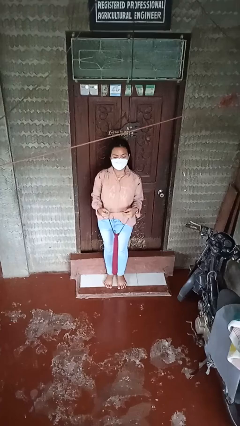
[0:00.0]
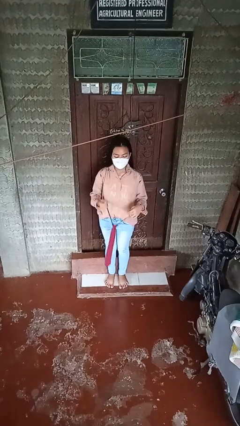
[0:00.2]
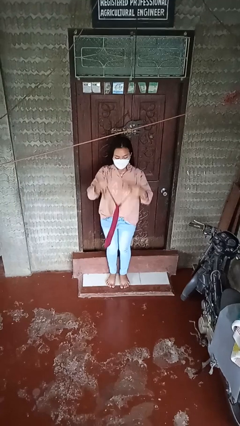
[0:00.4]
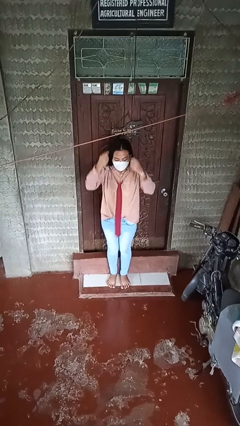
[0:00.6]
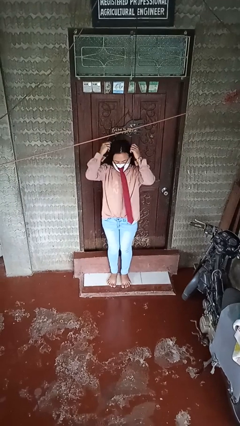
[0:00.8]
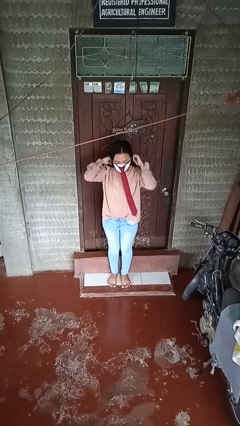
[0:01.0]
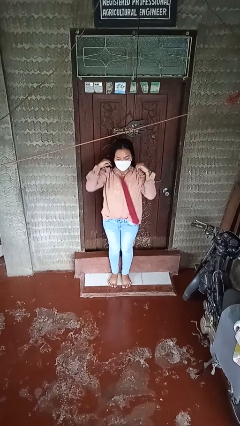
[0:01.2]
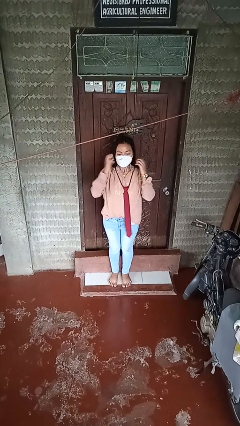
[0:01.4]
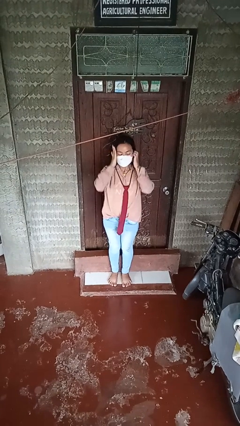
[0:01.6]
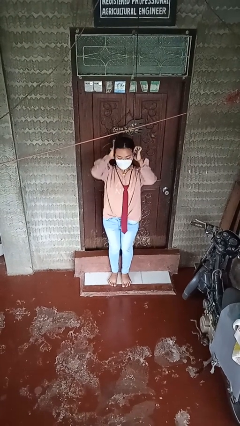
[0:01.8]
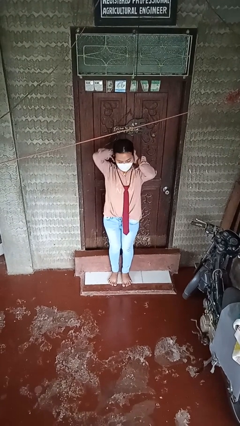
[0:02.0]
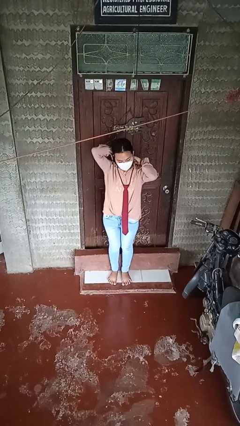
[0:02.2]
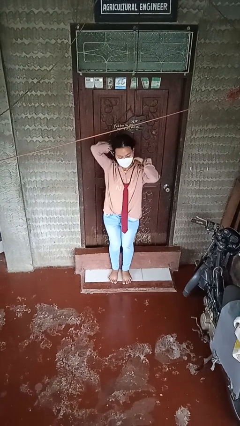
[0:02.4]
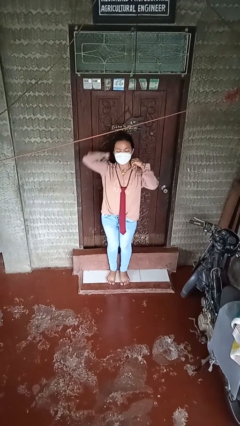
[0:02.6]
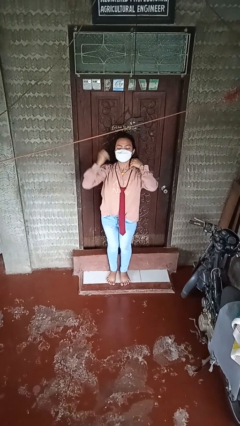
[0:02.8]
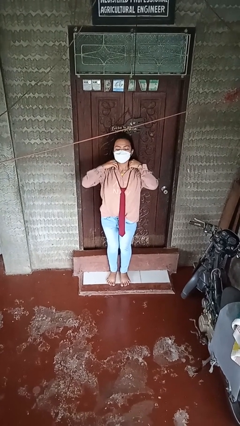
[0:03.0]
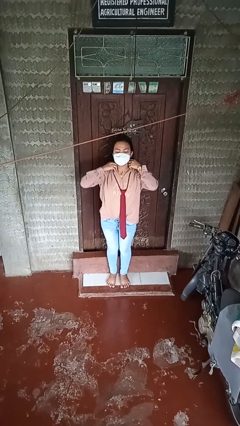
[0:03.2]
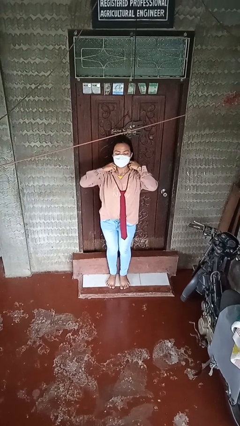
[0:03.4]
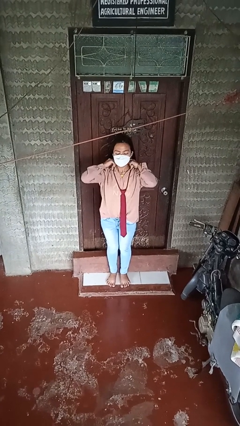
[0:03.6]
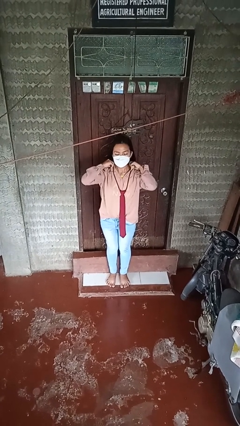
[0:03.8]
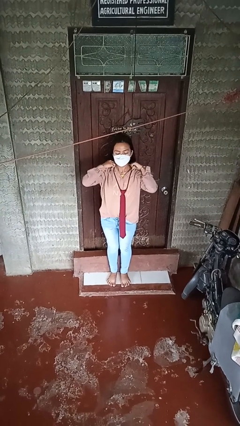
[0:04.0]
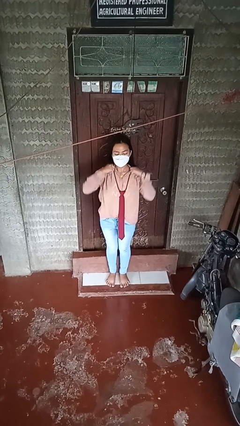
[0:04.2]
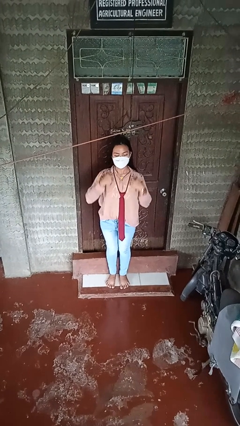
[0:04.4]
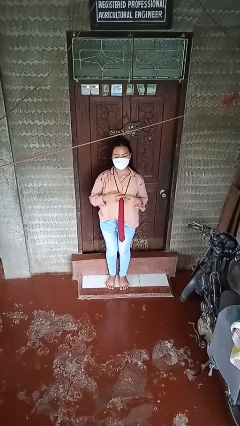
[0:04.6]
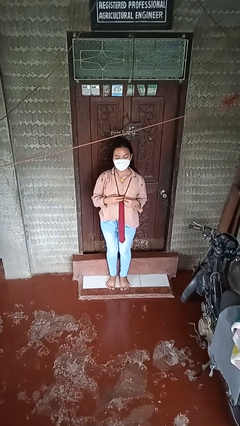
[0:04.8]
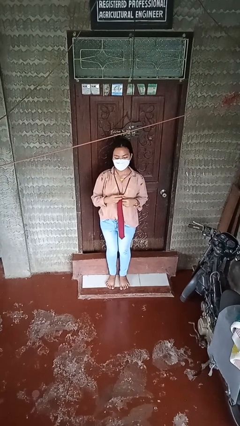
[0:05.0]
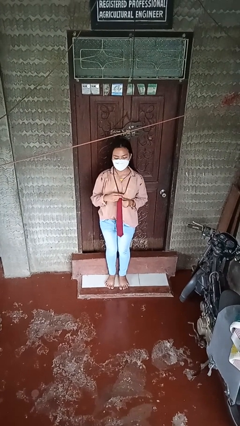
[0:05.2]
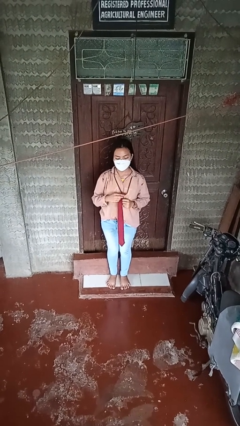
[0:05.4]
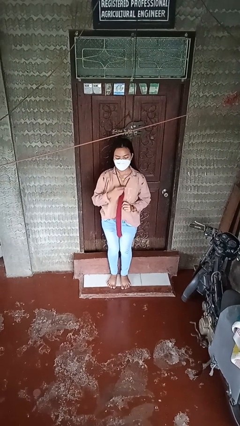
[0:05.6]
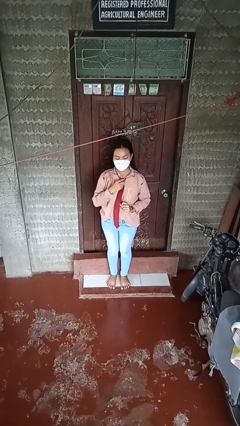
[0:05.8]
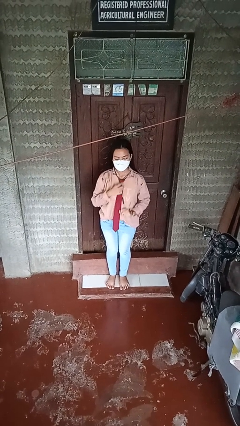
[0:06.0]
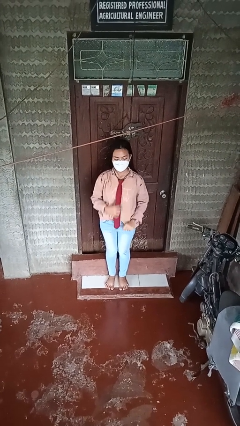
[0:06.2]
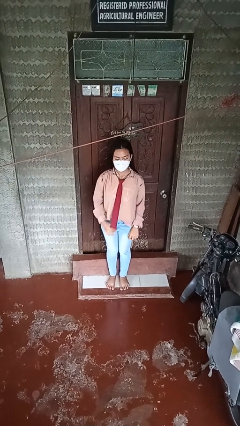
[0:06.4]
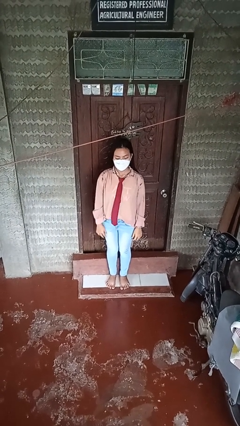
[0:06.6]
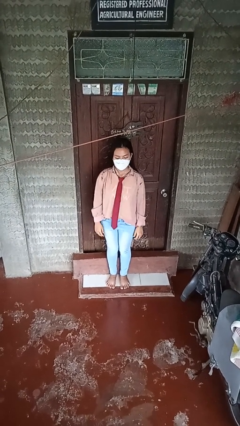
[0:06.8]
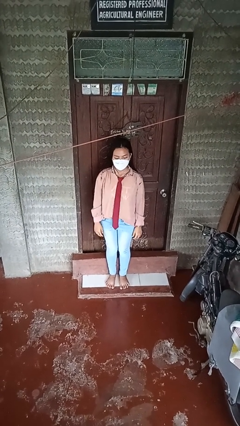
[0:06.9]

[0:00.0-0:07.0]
person puts on necktie

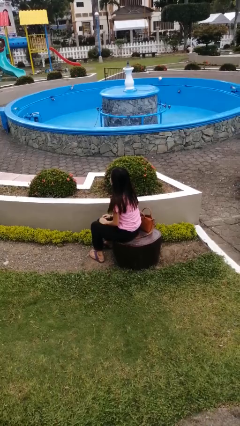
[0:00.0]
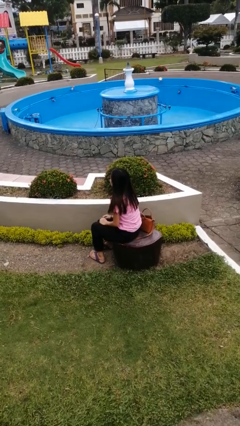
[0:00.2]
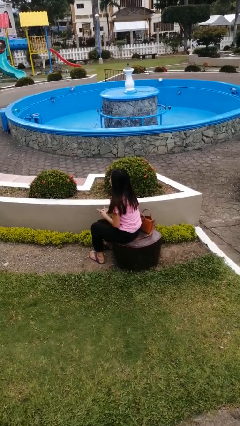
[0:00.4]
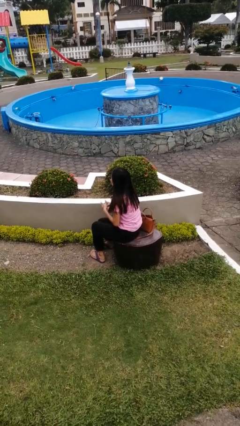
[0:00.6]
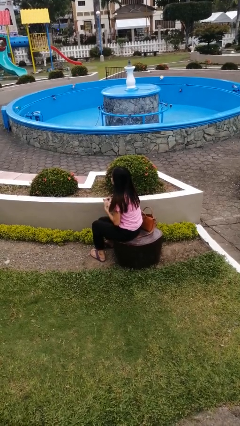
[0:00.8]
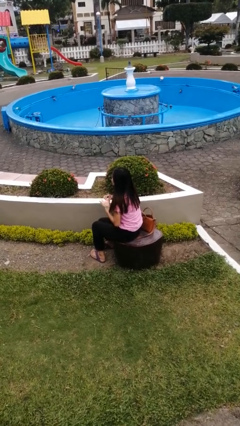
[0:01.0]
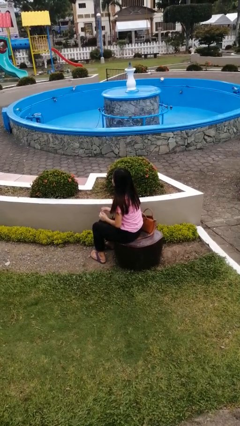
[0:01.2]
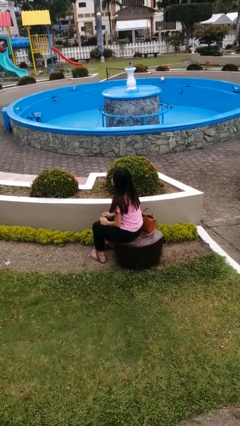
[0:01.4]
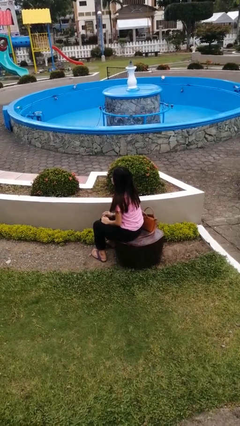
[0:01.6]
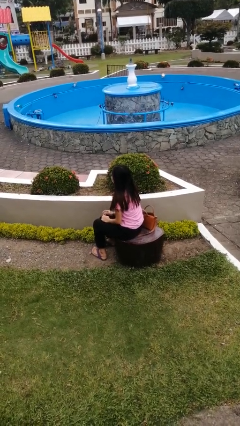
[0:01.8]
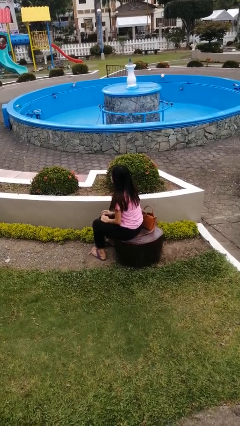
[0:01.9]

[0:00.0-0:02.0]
person takes off ring

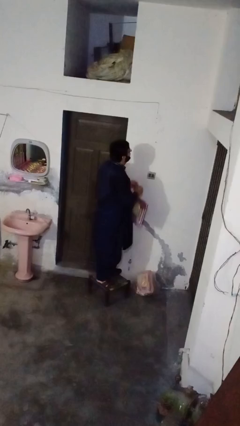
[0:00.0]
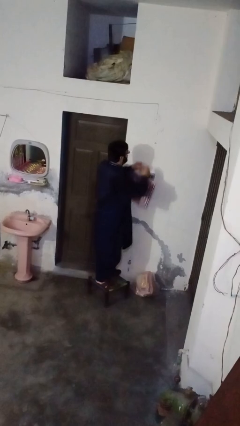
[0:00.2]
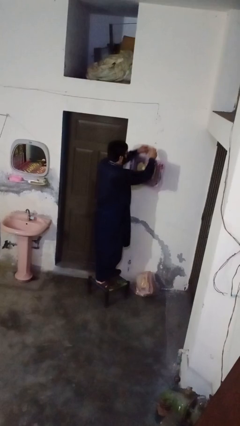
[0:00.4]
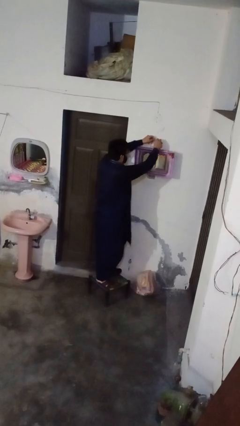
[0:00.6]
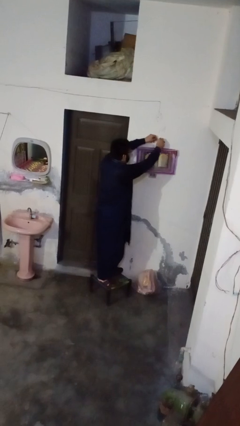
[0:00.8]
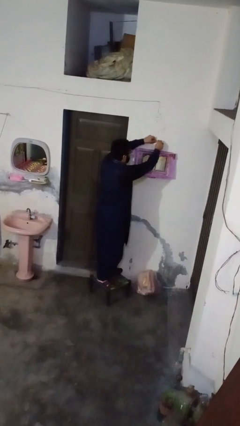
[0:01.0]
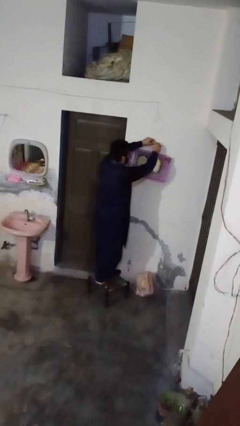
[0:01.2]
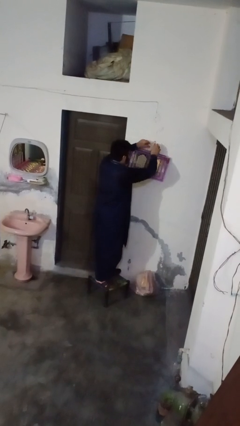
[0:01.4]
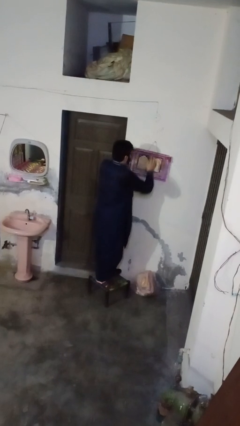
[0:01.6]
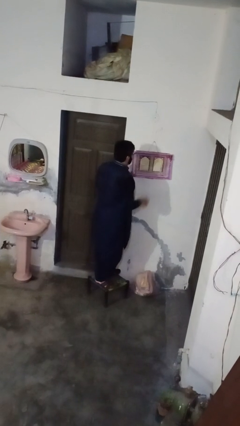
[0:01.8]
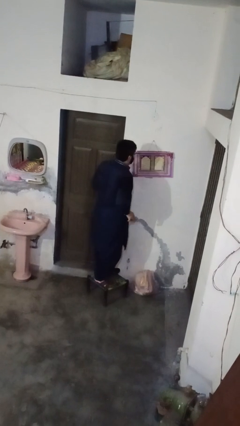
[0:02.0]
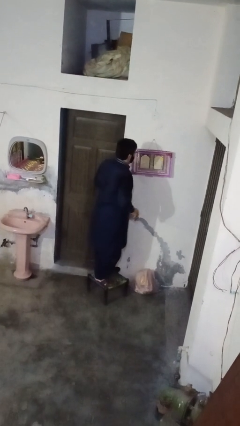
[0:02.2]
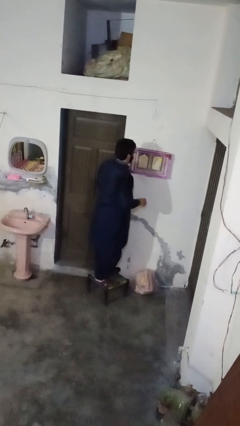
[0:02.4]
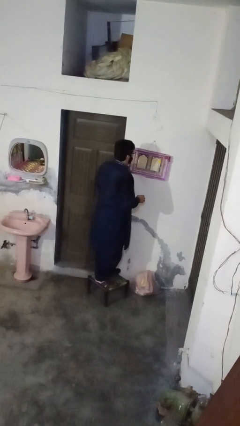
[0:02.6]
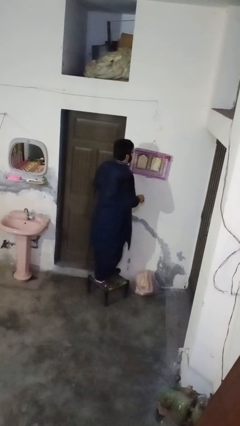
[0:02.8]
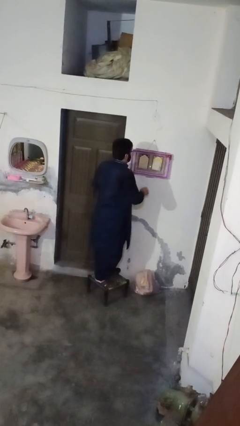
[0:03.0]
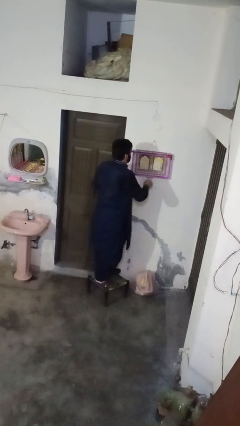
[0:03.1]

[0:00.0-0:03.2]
person puts up picture frame

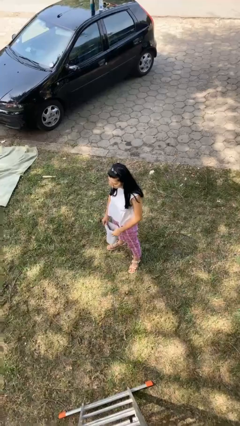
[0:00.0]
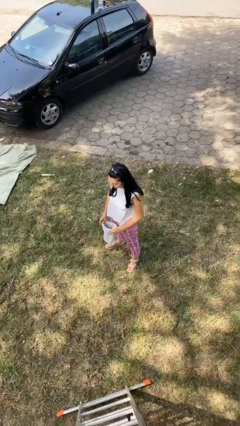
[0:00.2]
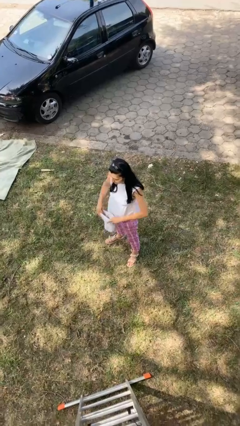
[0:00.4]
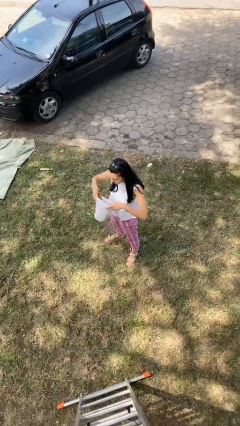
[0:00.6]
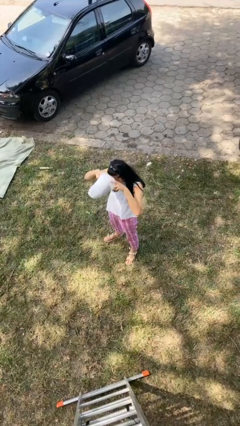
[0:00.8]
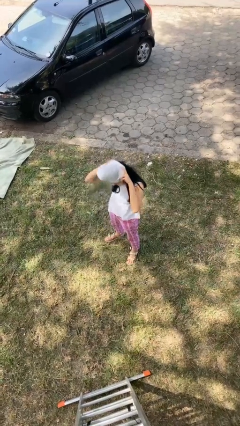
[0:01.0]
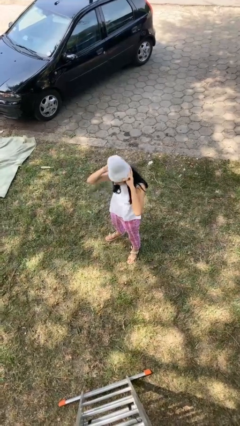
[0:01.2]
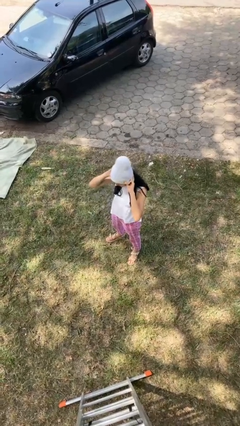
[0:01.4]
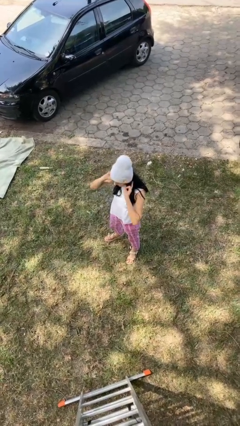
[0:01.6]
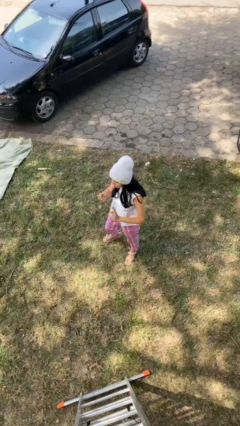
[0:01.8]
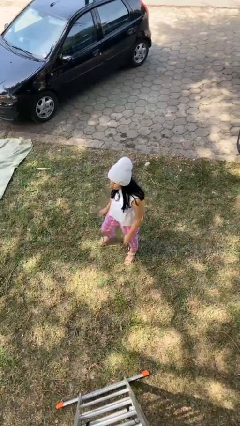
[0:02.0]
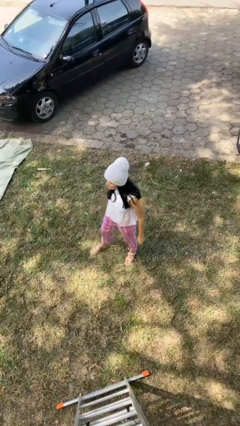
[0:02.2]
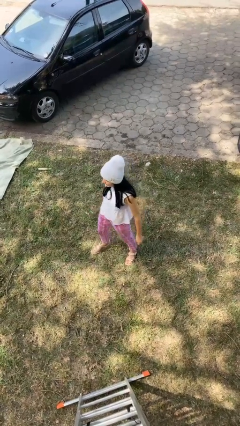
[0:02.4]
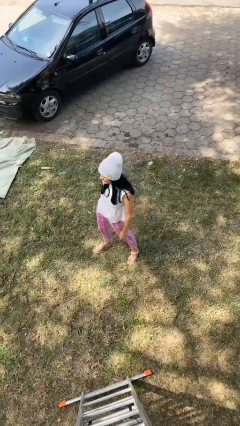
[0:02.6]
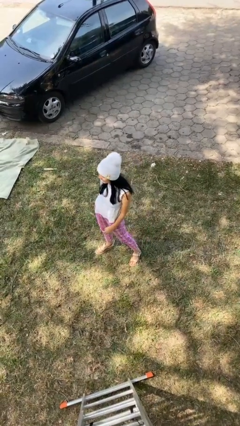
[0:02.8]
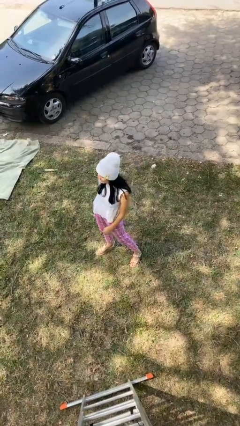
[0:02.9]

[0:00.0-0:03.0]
person puts on hat

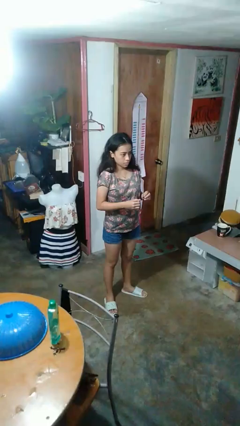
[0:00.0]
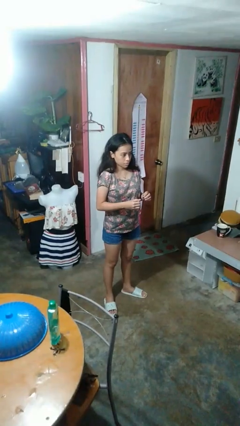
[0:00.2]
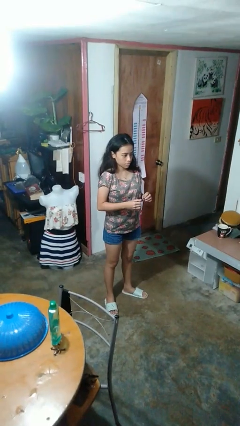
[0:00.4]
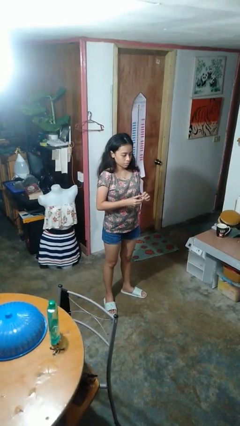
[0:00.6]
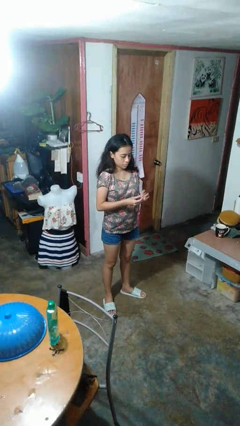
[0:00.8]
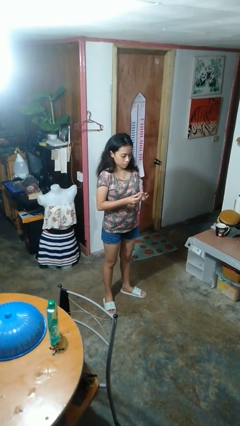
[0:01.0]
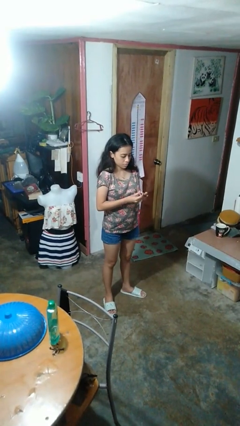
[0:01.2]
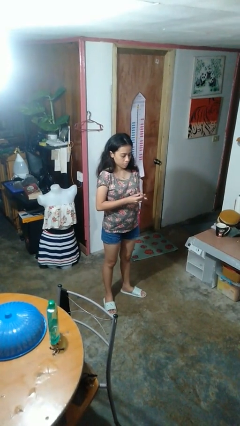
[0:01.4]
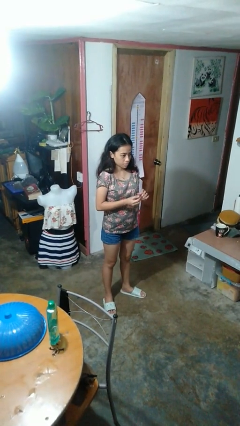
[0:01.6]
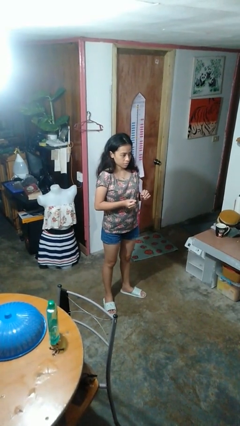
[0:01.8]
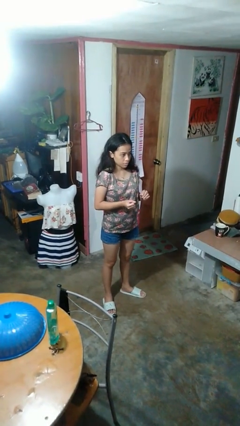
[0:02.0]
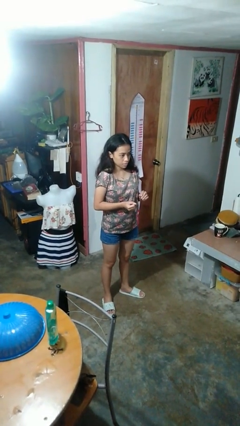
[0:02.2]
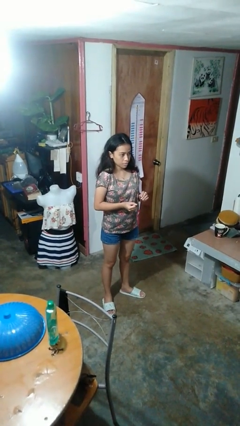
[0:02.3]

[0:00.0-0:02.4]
person puts on ring
